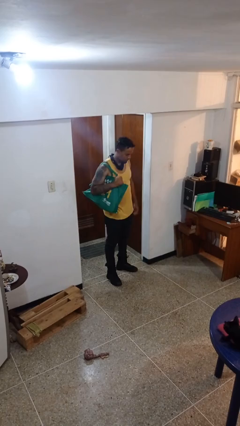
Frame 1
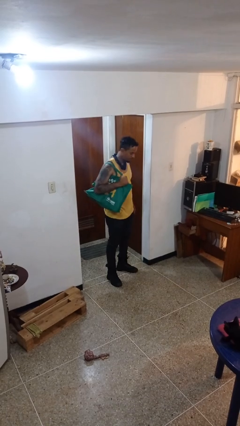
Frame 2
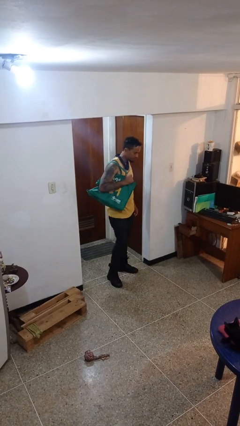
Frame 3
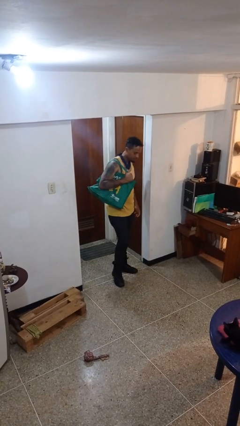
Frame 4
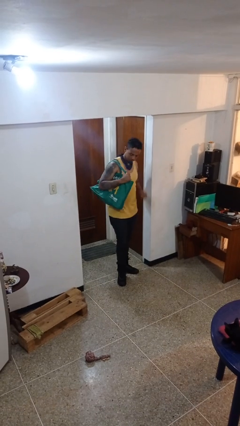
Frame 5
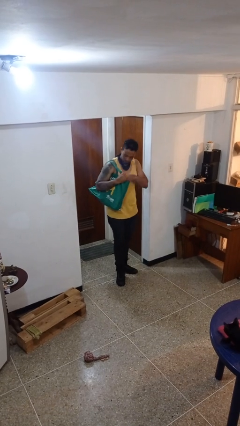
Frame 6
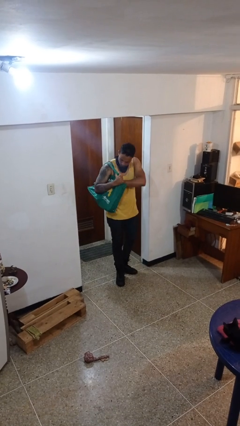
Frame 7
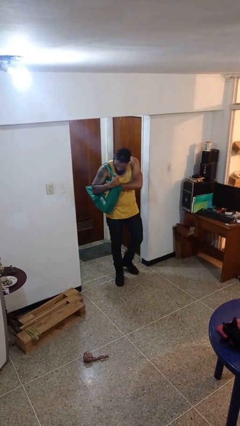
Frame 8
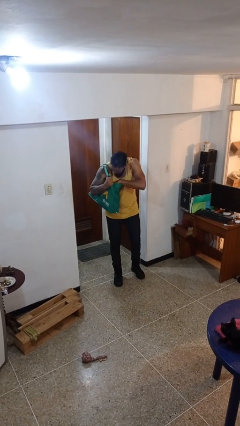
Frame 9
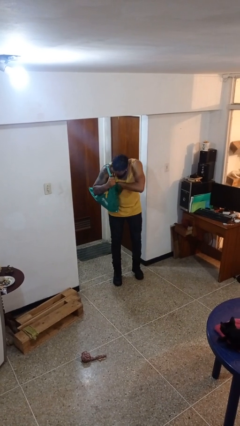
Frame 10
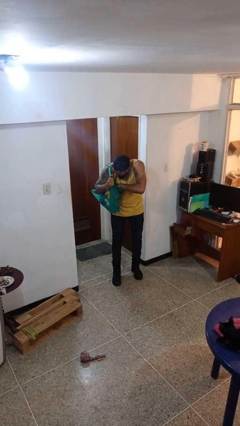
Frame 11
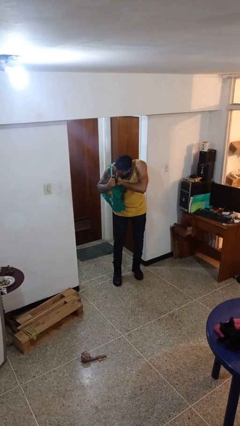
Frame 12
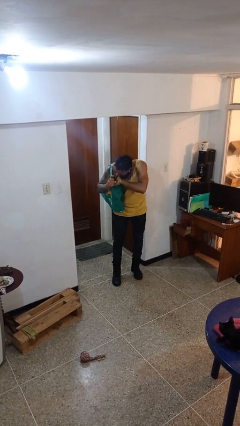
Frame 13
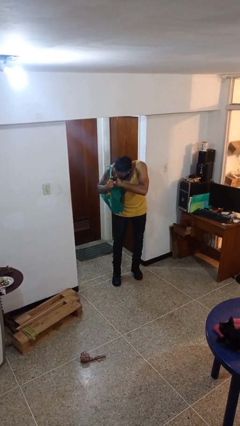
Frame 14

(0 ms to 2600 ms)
person searches in purse

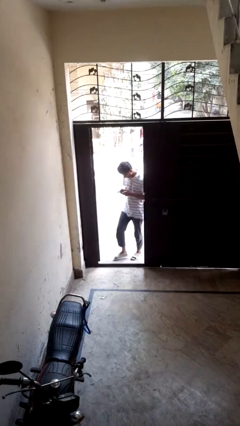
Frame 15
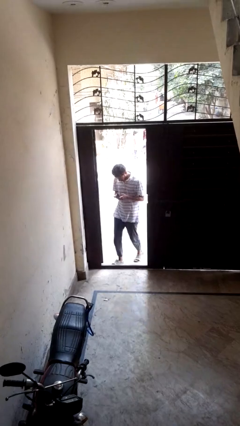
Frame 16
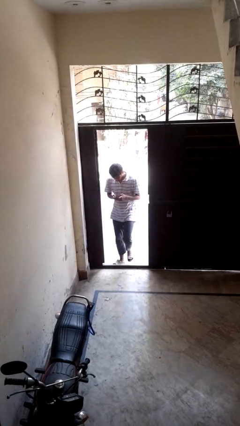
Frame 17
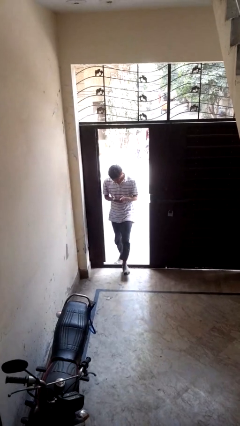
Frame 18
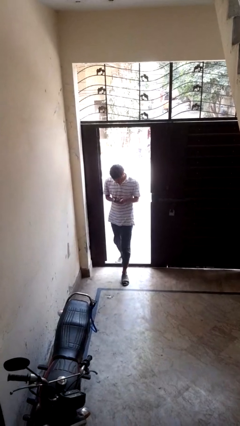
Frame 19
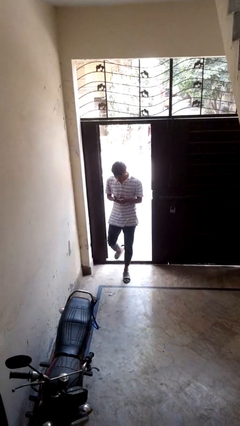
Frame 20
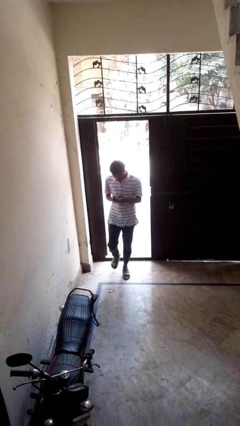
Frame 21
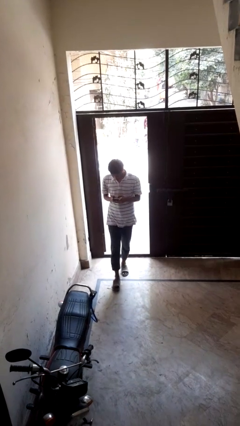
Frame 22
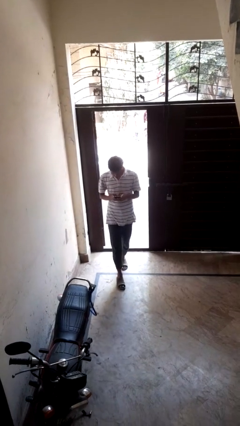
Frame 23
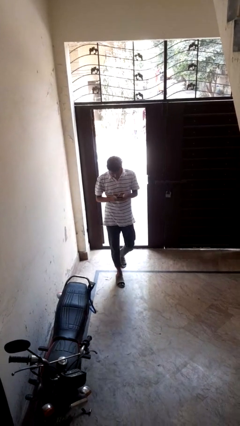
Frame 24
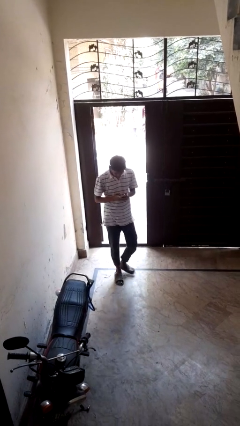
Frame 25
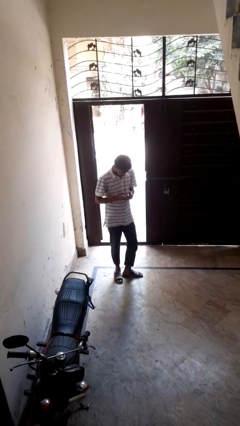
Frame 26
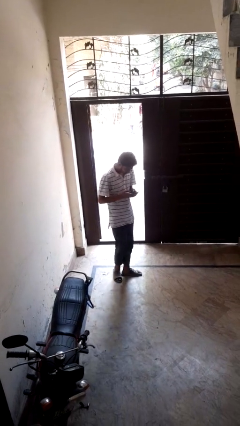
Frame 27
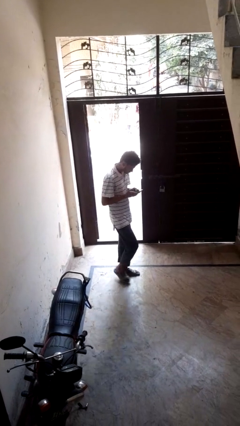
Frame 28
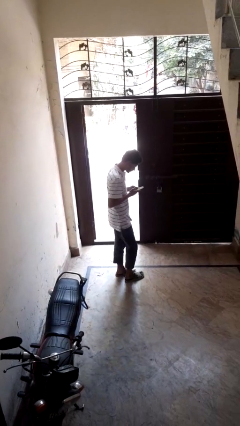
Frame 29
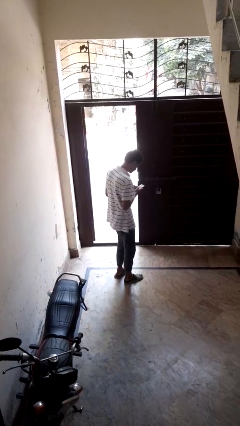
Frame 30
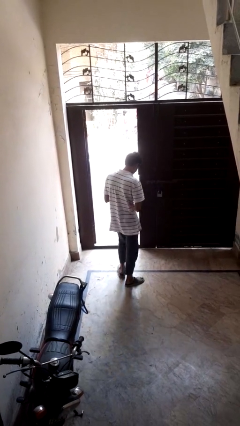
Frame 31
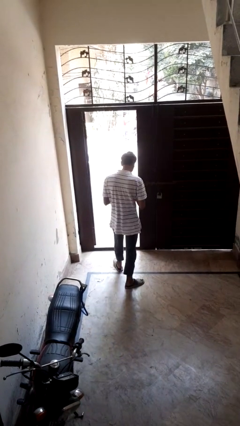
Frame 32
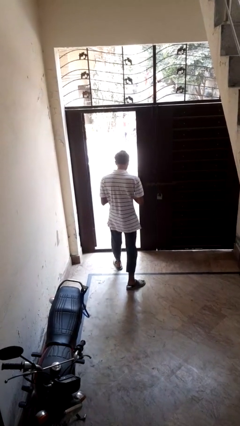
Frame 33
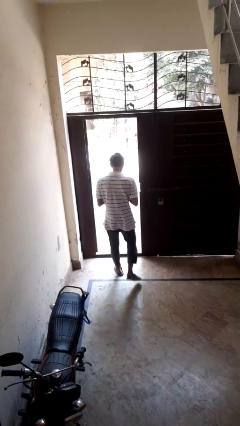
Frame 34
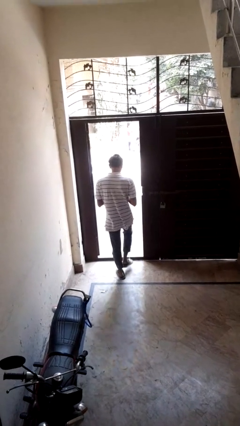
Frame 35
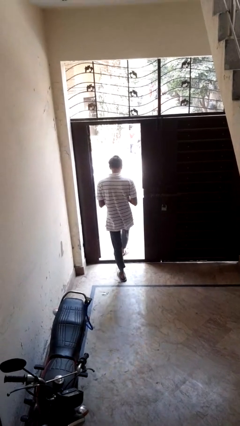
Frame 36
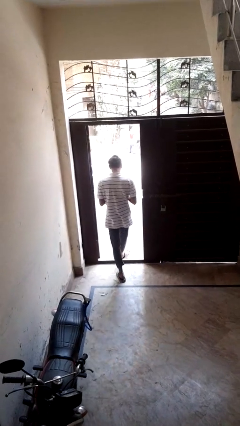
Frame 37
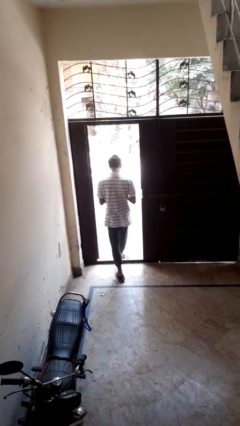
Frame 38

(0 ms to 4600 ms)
person enters scene through structure

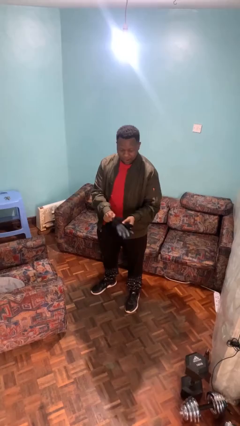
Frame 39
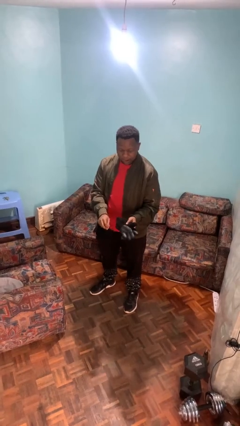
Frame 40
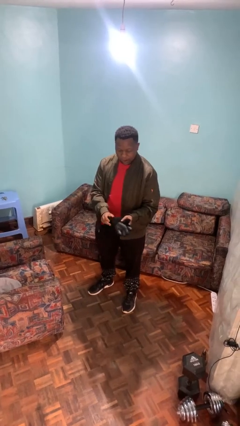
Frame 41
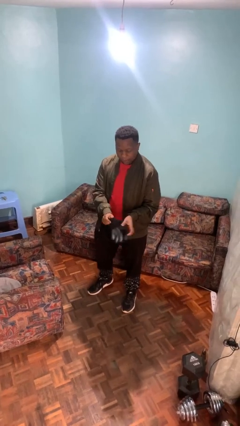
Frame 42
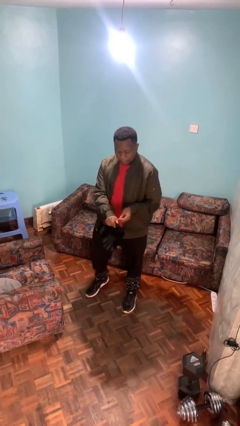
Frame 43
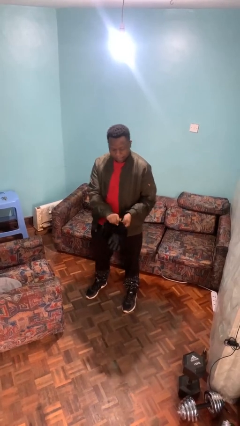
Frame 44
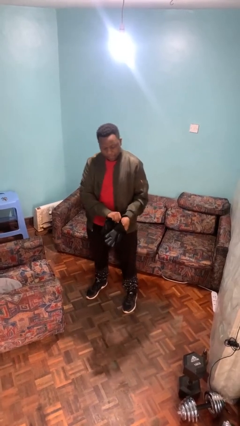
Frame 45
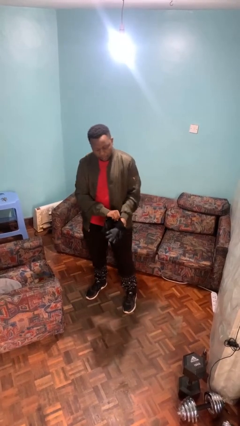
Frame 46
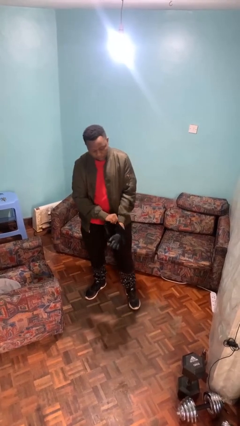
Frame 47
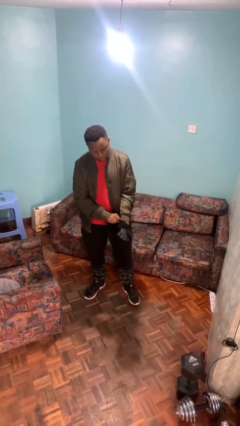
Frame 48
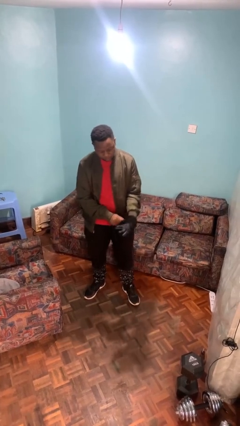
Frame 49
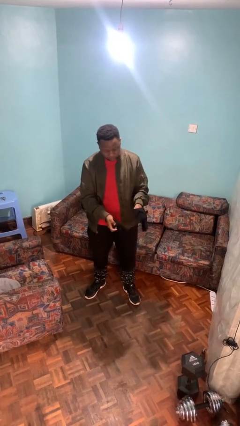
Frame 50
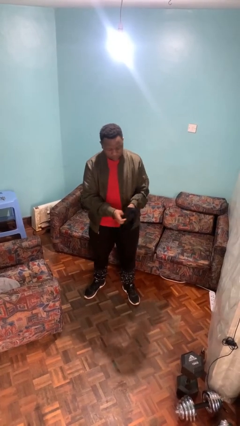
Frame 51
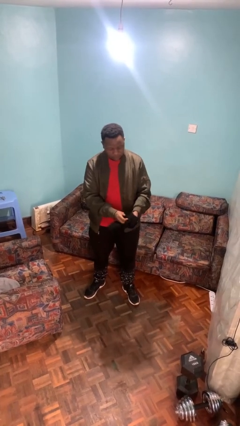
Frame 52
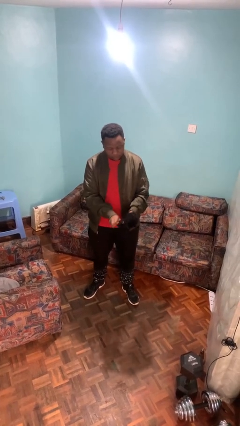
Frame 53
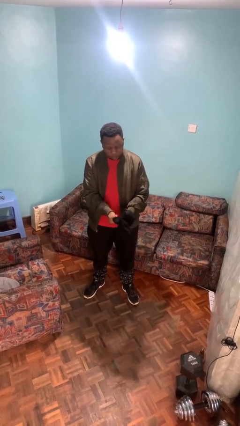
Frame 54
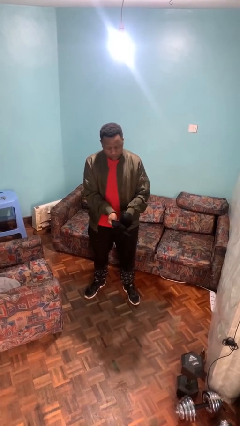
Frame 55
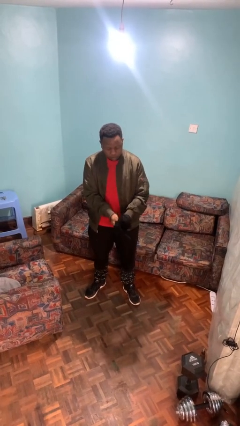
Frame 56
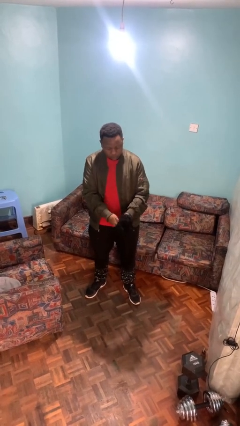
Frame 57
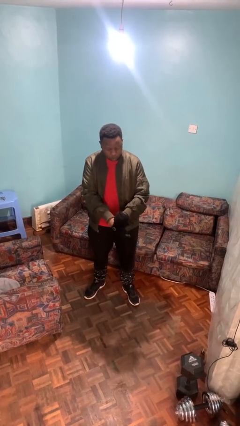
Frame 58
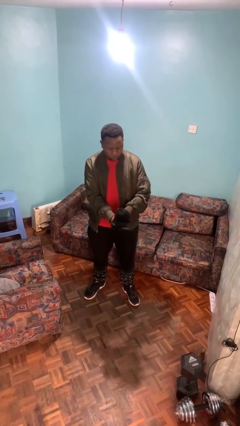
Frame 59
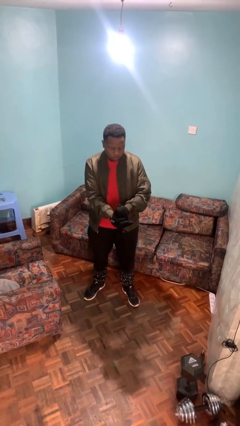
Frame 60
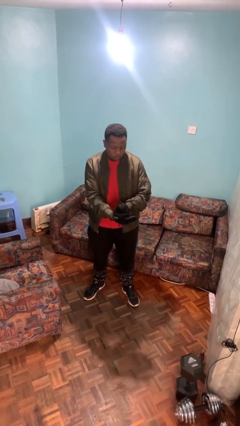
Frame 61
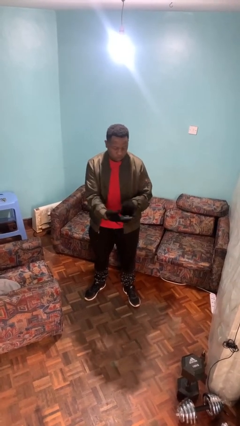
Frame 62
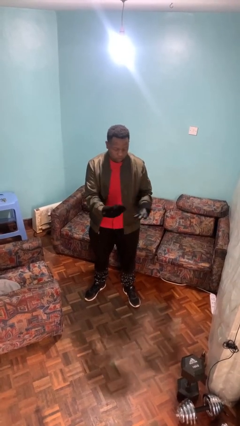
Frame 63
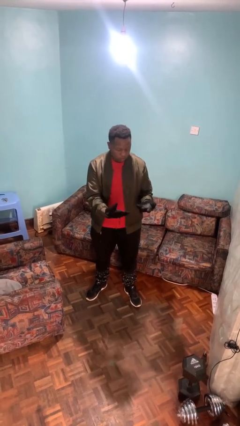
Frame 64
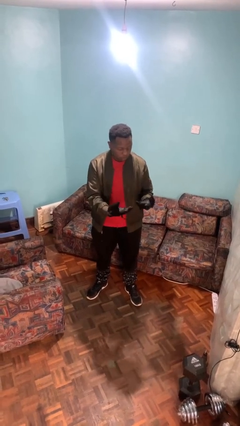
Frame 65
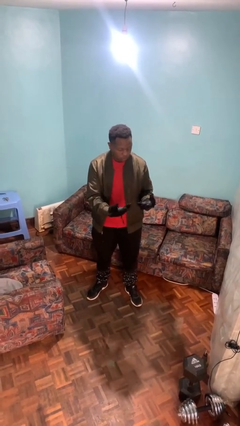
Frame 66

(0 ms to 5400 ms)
person puts on gloves

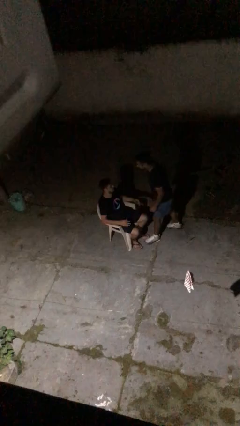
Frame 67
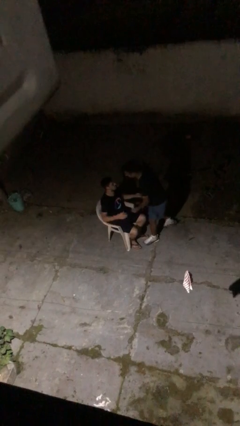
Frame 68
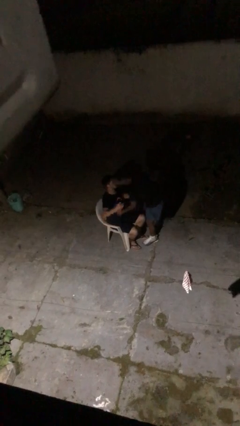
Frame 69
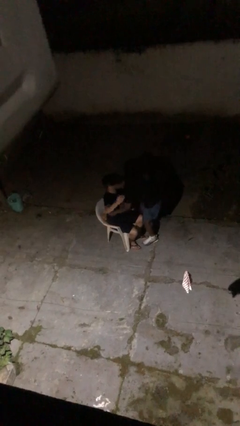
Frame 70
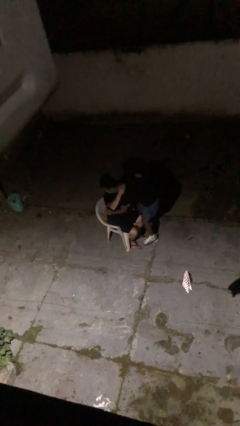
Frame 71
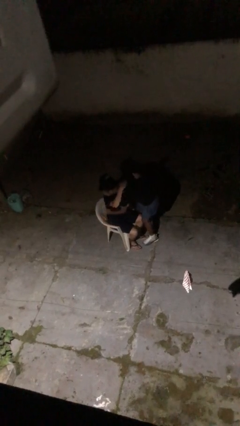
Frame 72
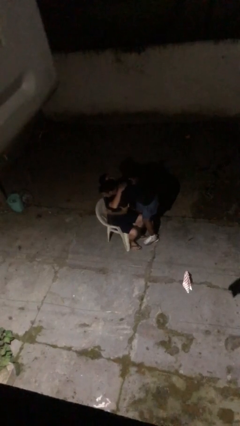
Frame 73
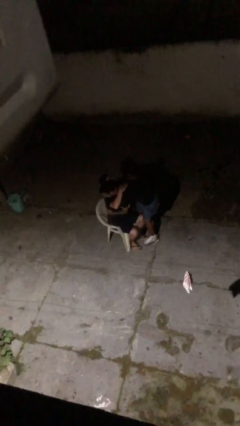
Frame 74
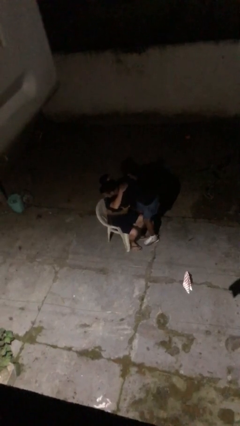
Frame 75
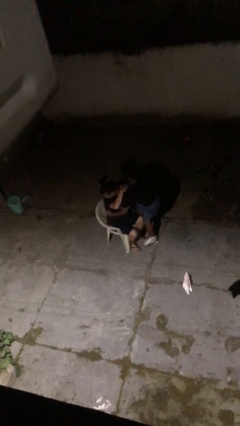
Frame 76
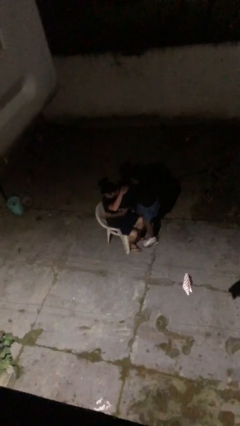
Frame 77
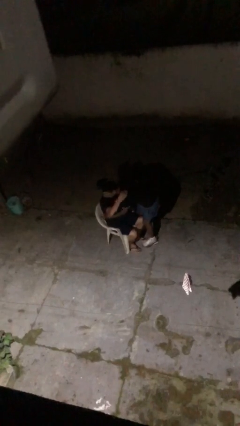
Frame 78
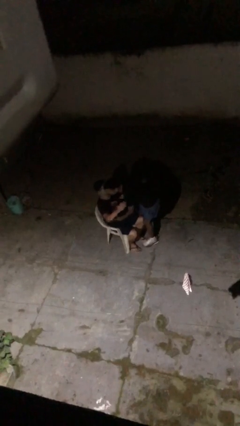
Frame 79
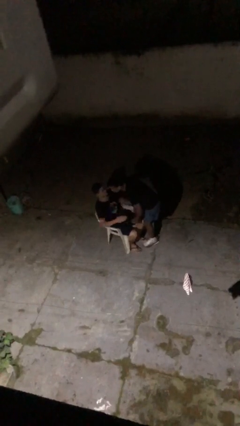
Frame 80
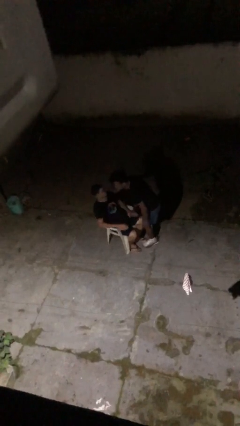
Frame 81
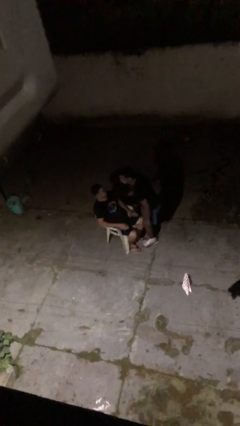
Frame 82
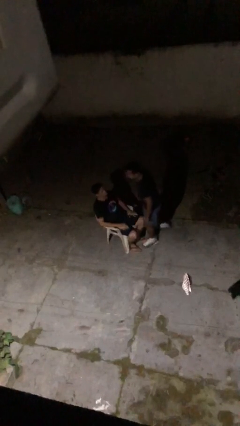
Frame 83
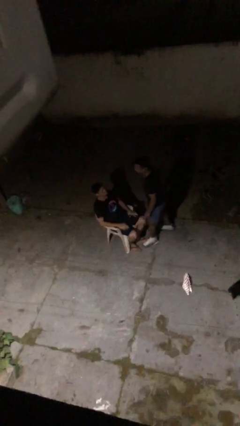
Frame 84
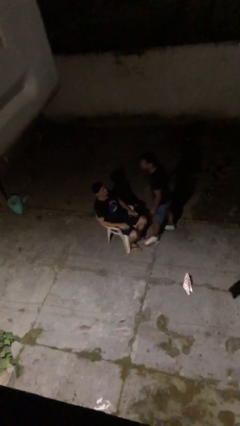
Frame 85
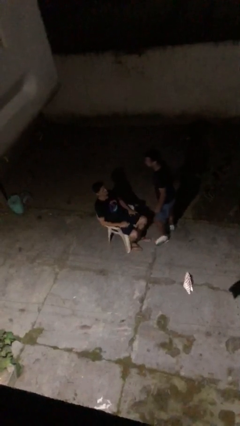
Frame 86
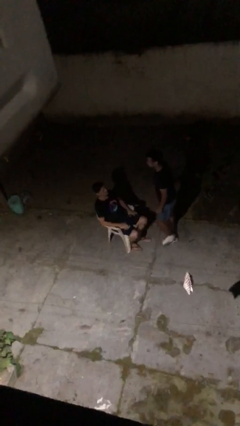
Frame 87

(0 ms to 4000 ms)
person embraces person

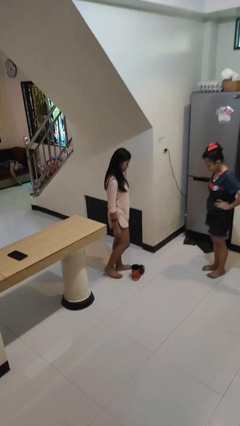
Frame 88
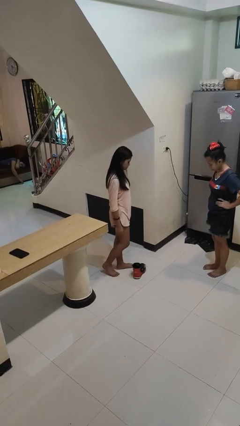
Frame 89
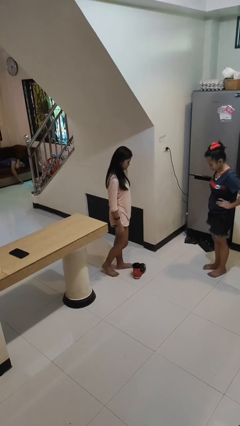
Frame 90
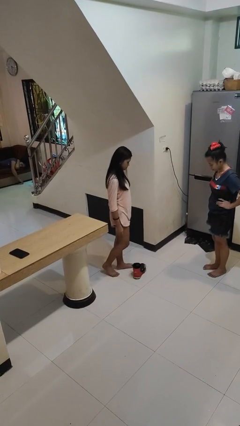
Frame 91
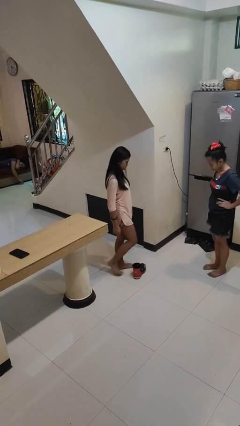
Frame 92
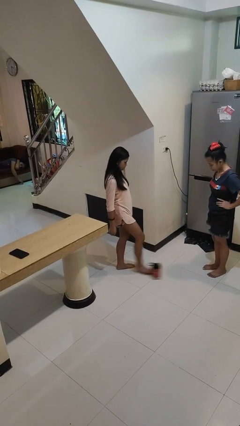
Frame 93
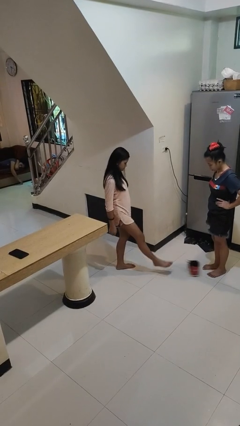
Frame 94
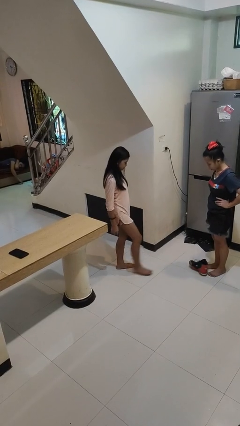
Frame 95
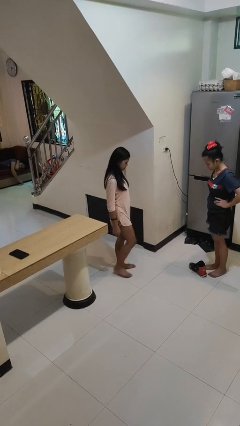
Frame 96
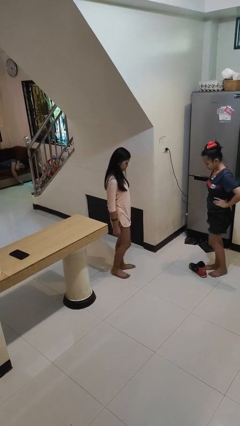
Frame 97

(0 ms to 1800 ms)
person kicks object to person
